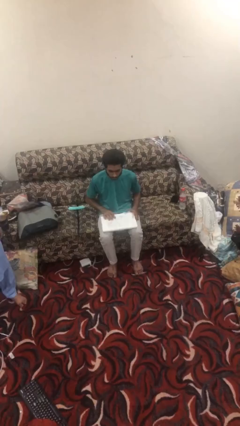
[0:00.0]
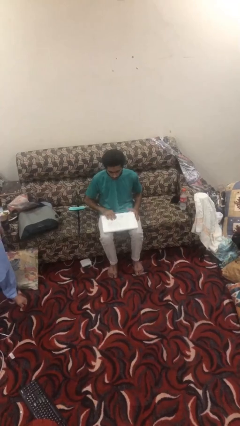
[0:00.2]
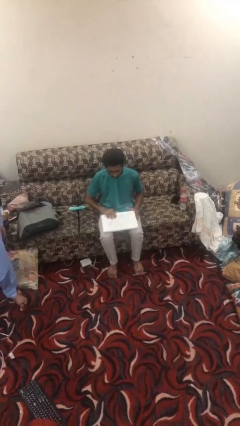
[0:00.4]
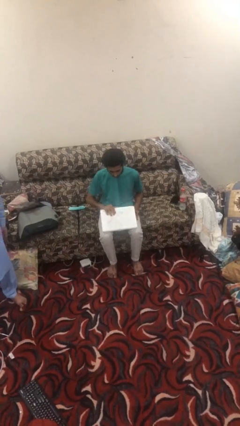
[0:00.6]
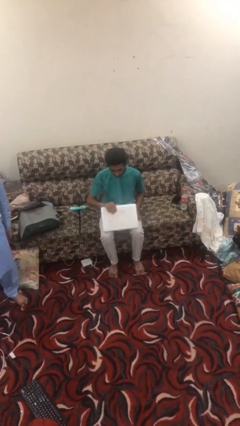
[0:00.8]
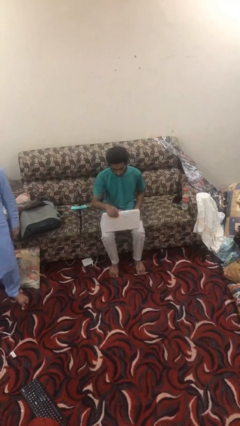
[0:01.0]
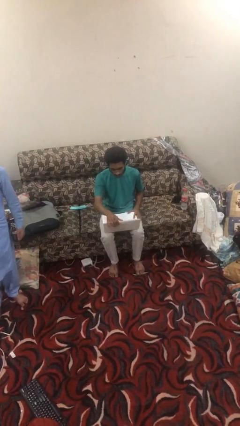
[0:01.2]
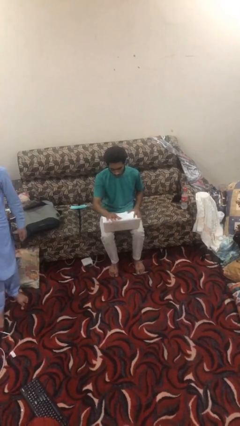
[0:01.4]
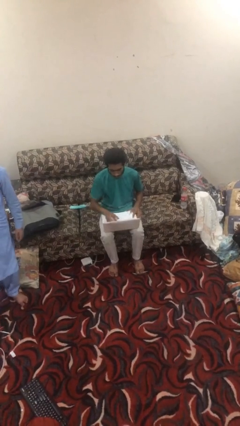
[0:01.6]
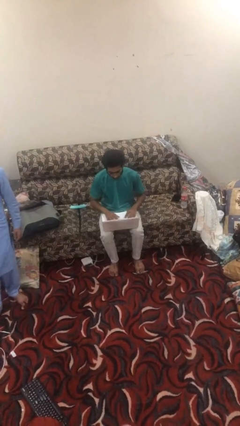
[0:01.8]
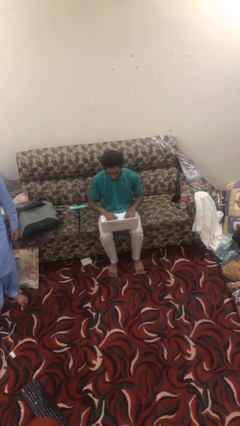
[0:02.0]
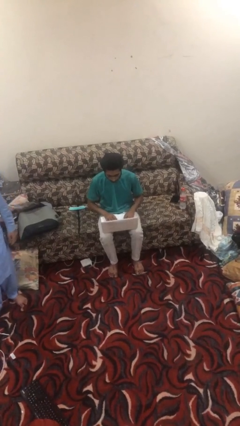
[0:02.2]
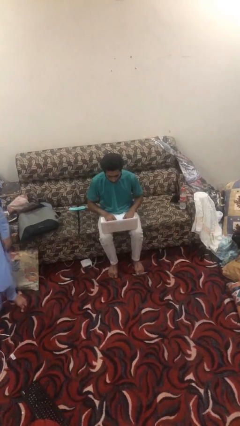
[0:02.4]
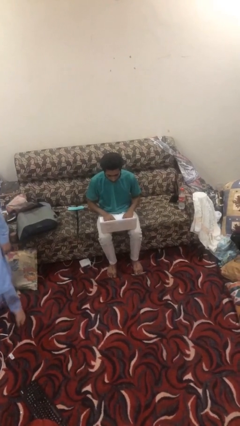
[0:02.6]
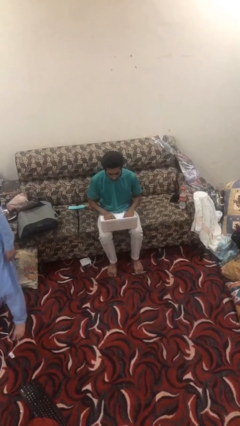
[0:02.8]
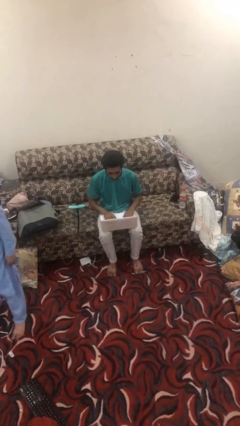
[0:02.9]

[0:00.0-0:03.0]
person opens laptop

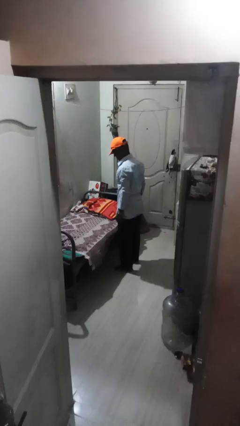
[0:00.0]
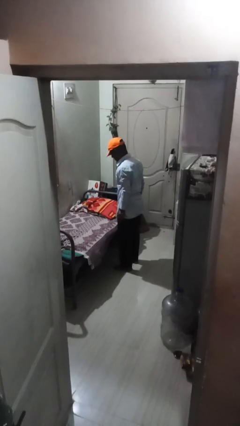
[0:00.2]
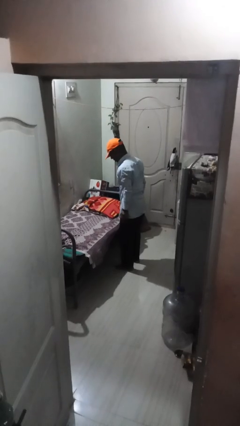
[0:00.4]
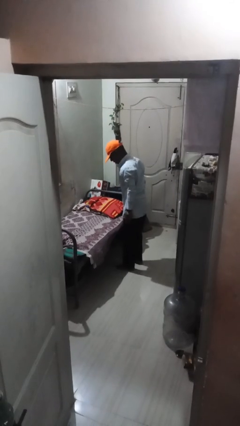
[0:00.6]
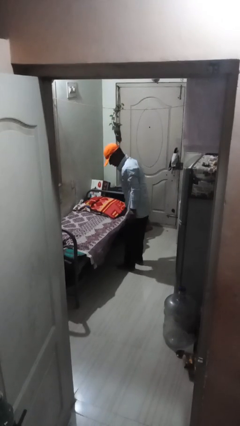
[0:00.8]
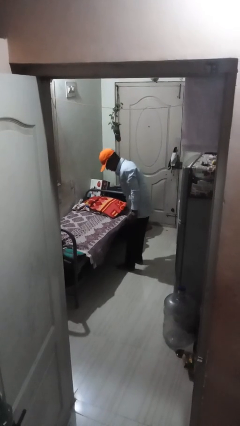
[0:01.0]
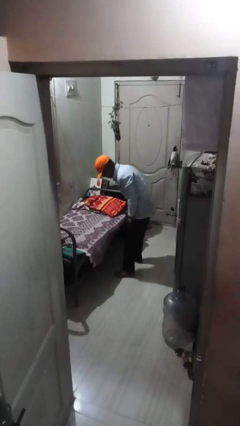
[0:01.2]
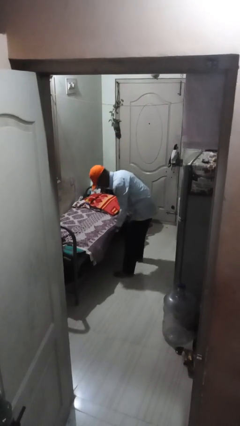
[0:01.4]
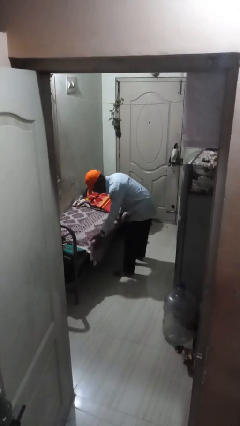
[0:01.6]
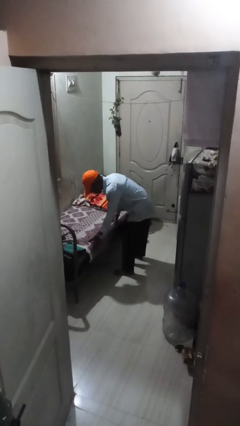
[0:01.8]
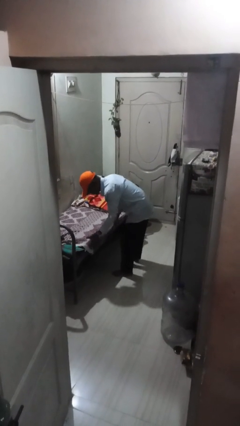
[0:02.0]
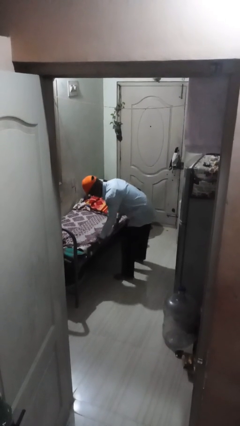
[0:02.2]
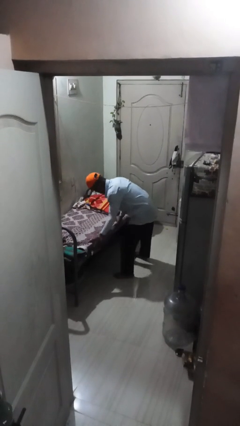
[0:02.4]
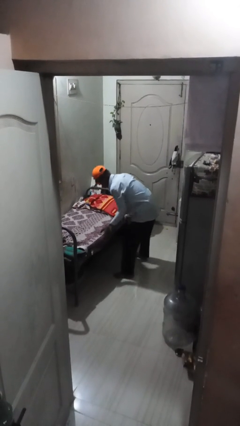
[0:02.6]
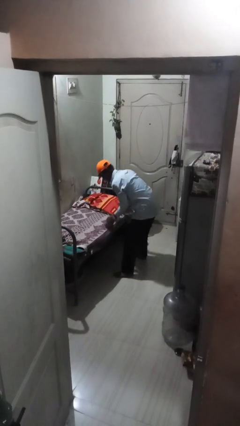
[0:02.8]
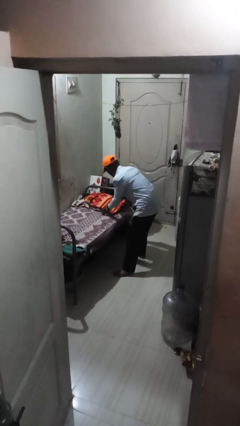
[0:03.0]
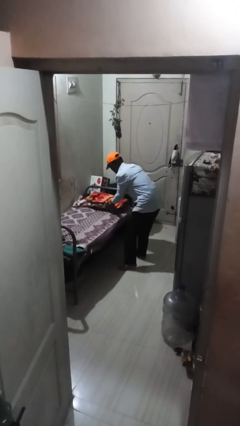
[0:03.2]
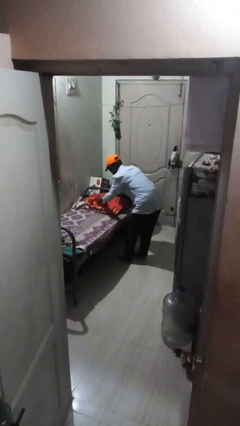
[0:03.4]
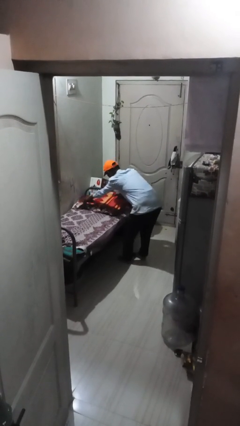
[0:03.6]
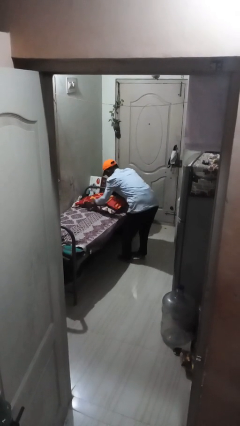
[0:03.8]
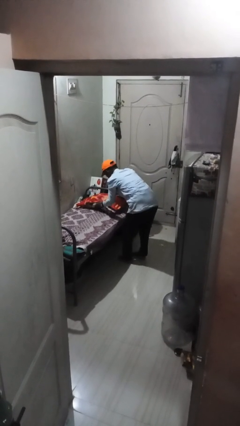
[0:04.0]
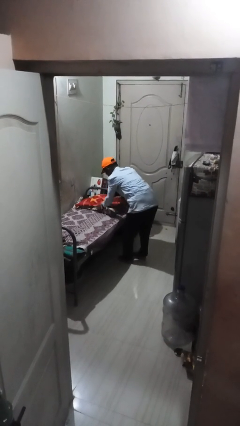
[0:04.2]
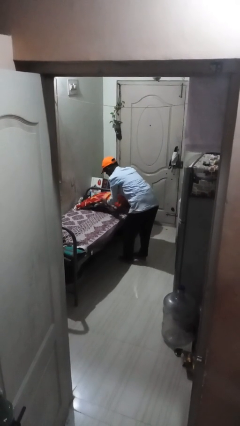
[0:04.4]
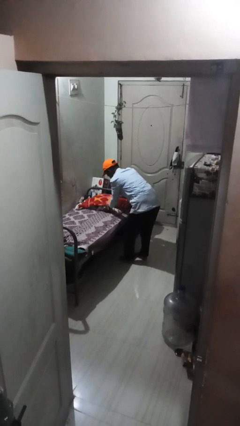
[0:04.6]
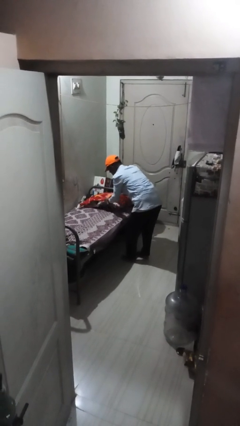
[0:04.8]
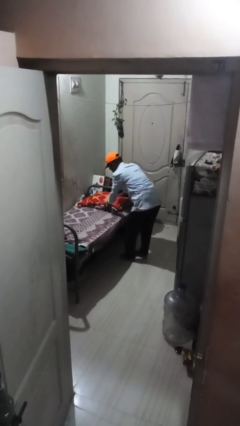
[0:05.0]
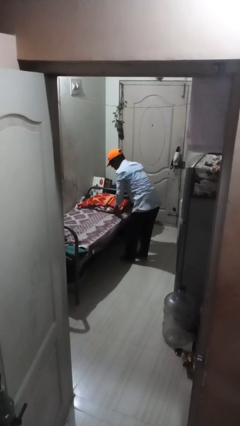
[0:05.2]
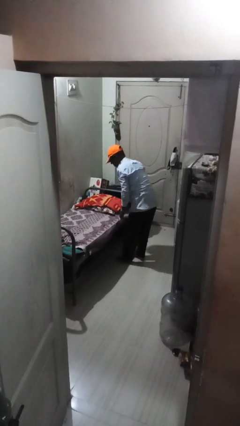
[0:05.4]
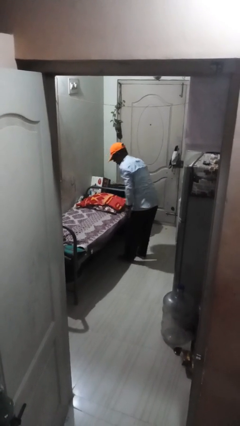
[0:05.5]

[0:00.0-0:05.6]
person makes bed

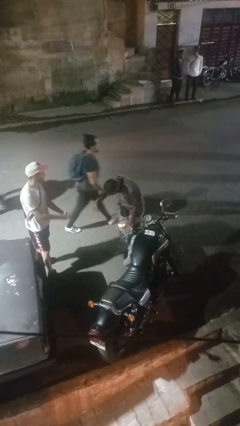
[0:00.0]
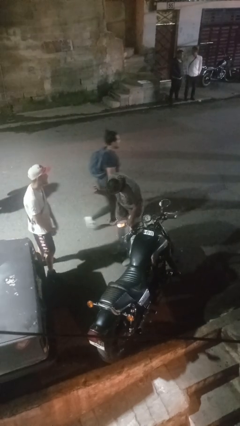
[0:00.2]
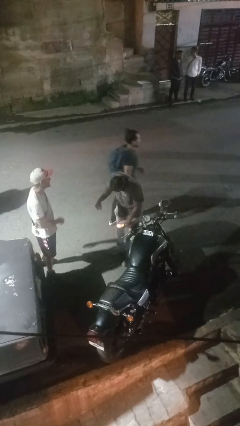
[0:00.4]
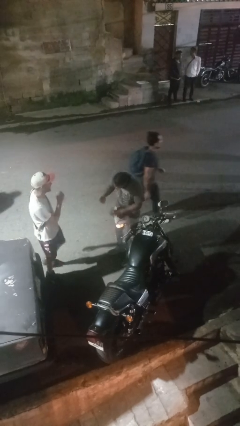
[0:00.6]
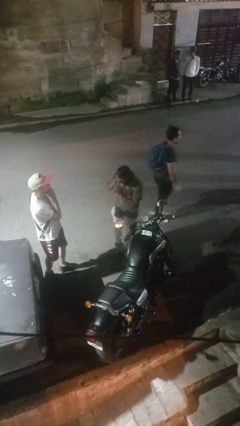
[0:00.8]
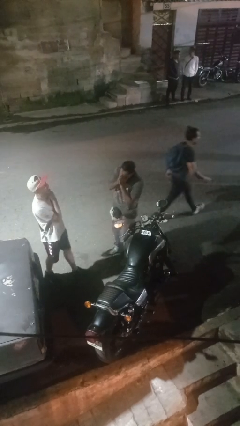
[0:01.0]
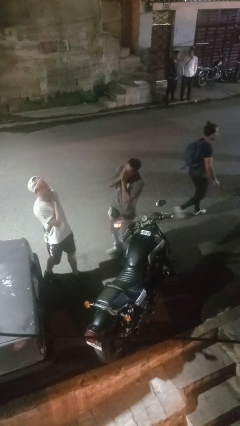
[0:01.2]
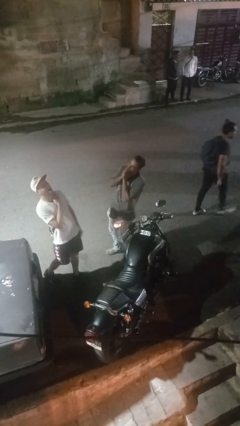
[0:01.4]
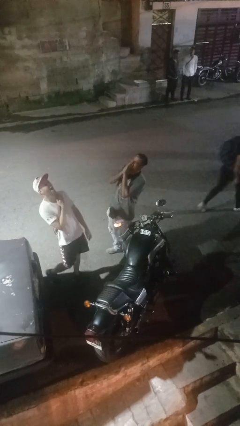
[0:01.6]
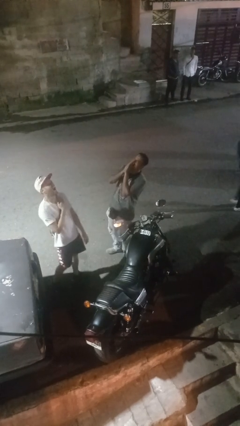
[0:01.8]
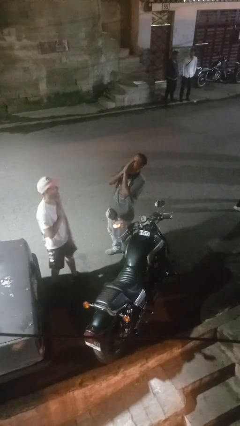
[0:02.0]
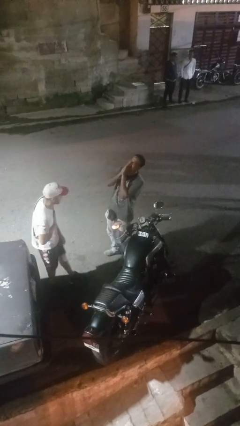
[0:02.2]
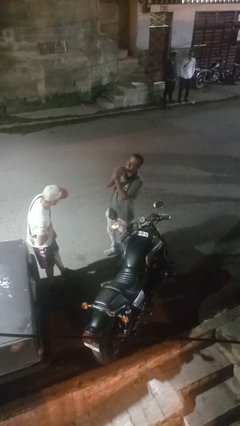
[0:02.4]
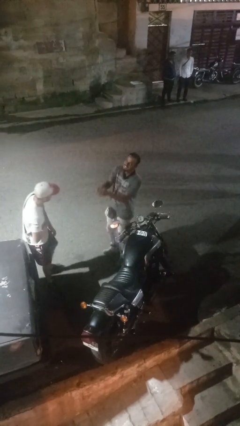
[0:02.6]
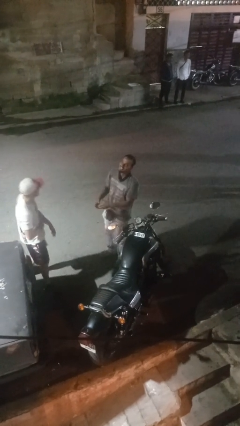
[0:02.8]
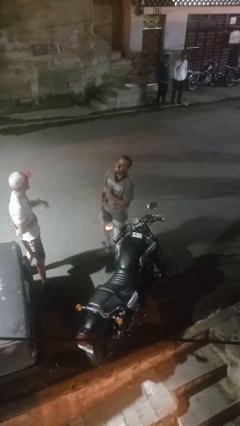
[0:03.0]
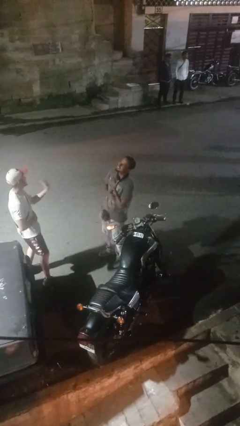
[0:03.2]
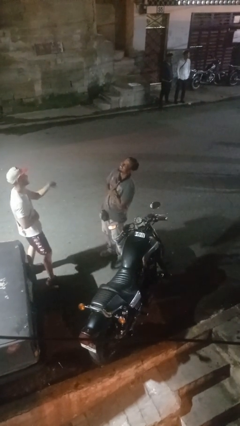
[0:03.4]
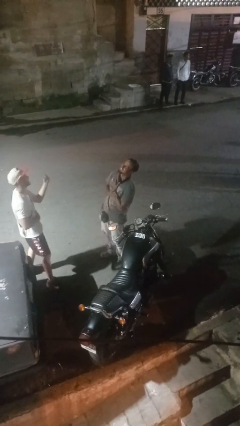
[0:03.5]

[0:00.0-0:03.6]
person laughs with person

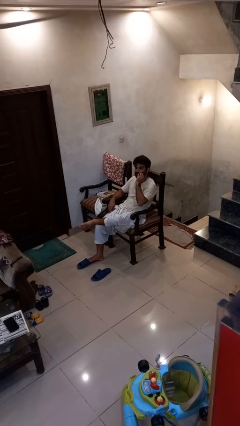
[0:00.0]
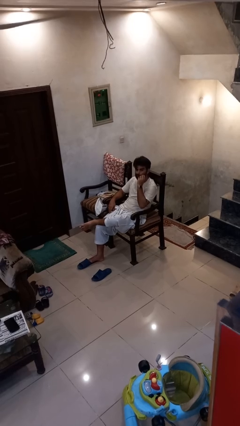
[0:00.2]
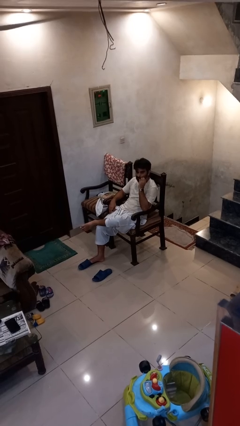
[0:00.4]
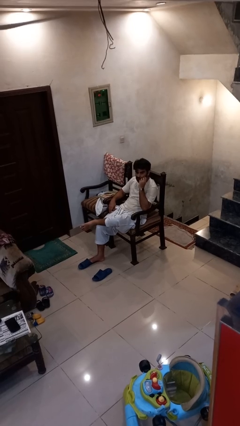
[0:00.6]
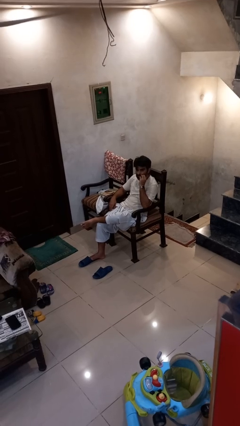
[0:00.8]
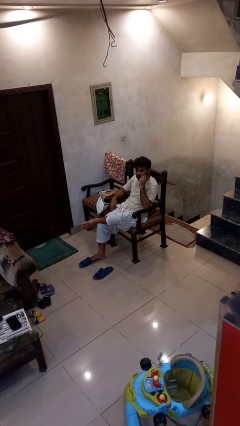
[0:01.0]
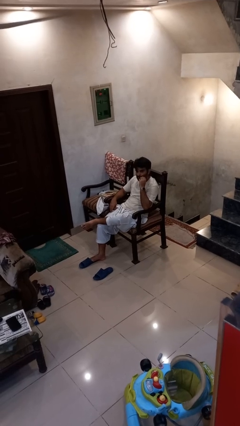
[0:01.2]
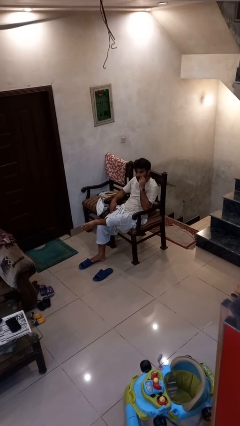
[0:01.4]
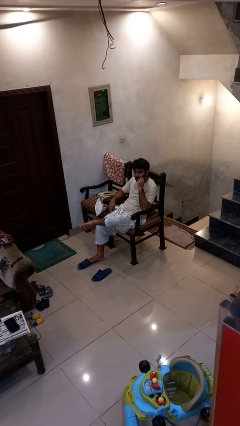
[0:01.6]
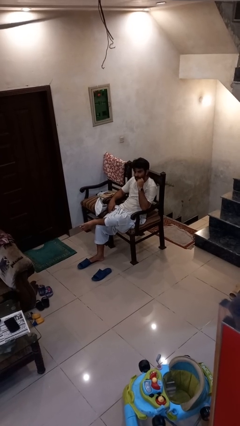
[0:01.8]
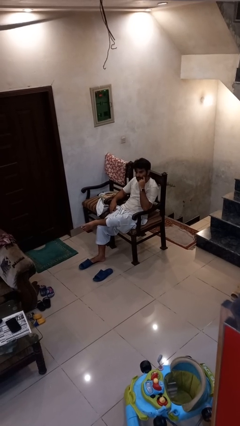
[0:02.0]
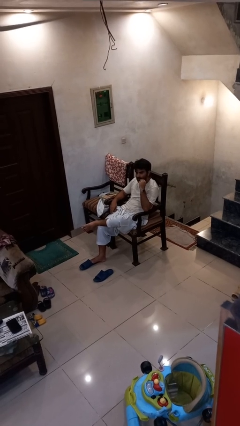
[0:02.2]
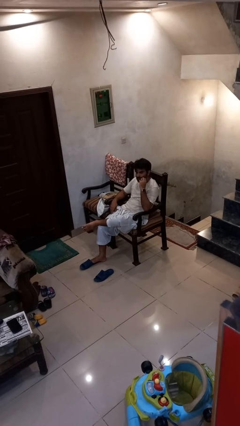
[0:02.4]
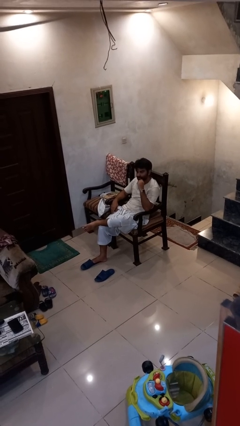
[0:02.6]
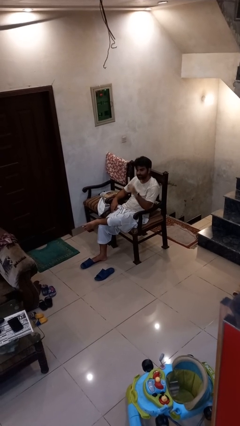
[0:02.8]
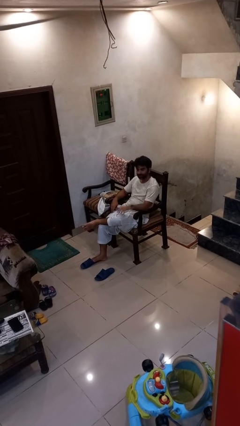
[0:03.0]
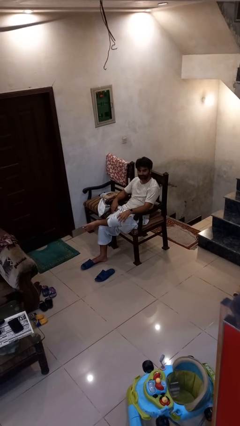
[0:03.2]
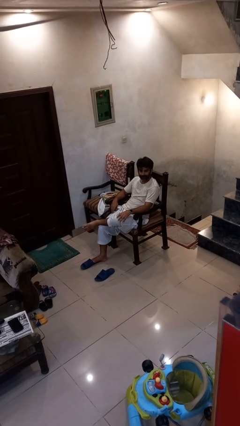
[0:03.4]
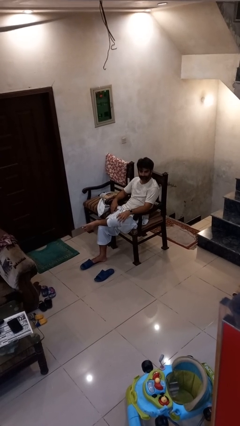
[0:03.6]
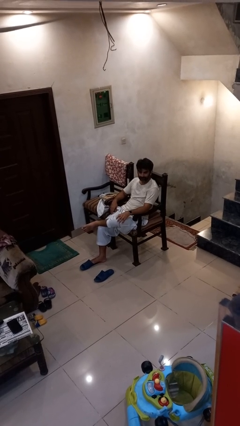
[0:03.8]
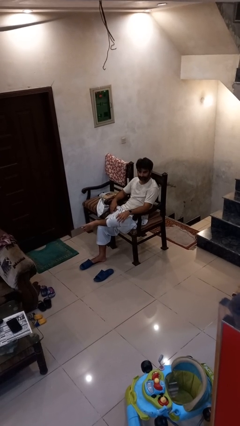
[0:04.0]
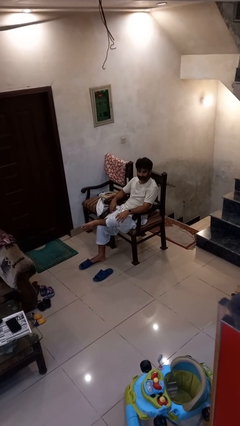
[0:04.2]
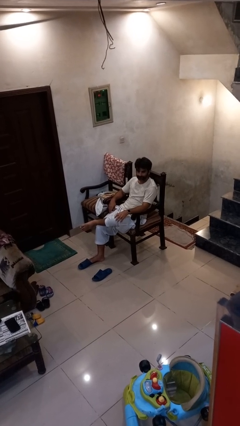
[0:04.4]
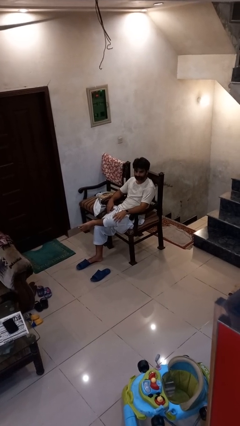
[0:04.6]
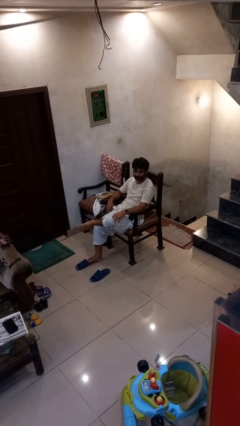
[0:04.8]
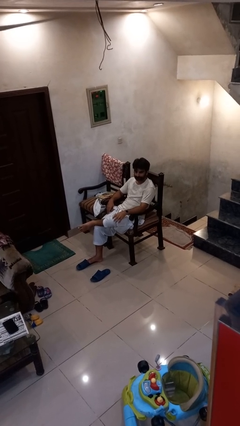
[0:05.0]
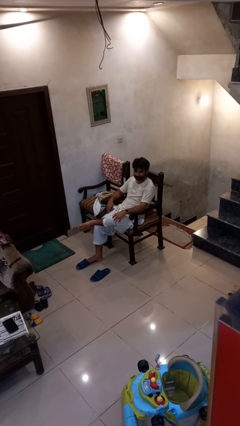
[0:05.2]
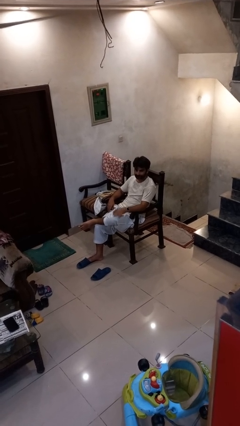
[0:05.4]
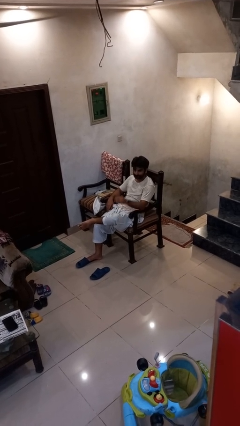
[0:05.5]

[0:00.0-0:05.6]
person cracks knuckles
